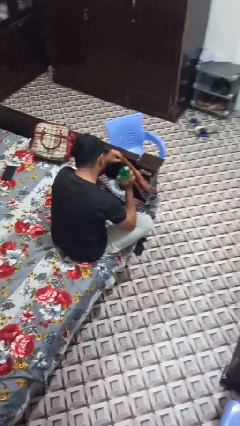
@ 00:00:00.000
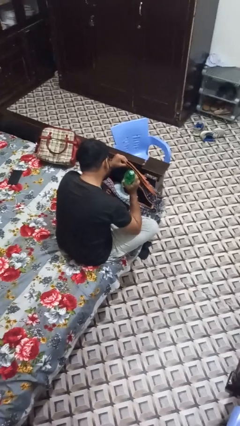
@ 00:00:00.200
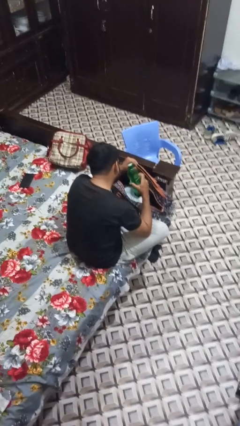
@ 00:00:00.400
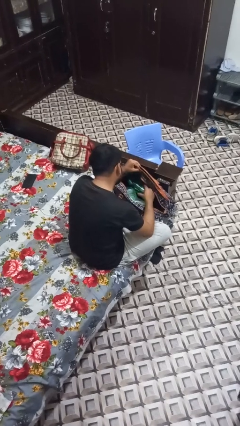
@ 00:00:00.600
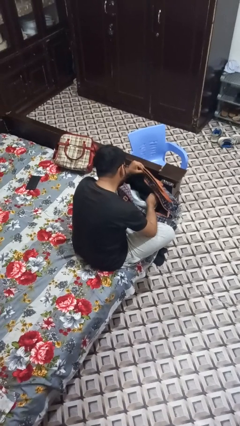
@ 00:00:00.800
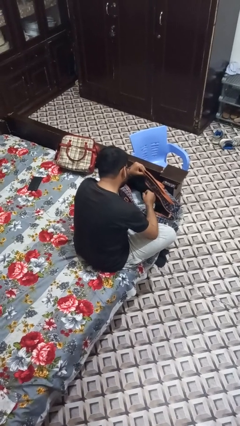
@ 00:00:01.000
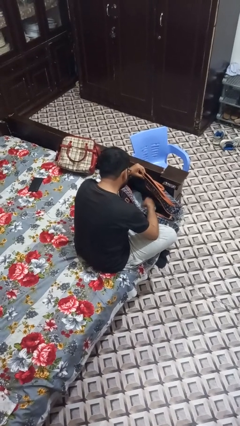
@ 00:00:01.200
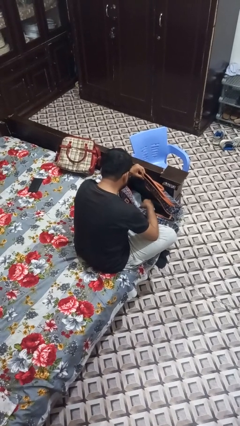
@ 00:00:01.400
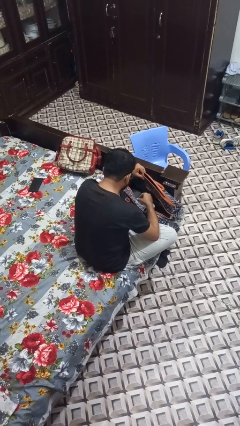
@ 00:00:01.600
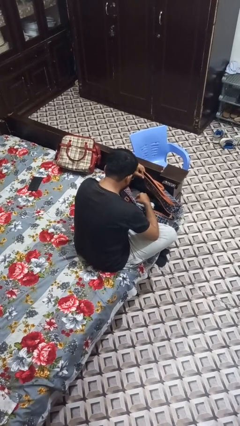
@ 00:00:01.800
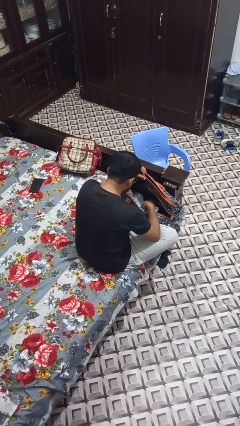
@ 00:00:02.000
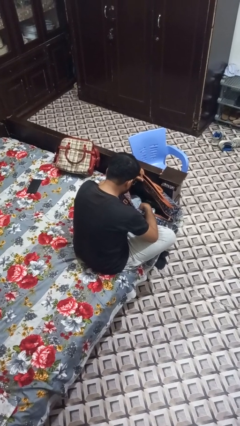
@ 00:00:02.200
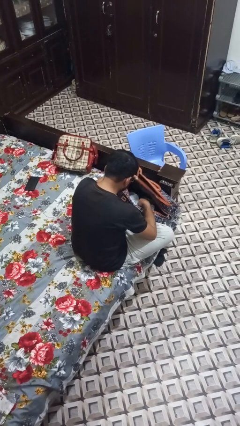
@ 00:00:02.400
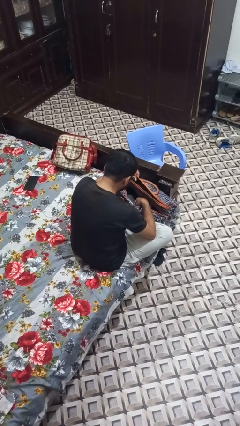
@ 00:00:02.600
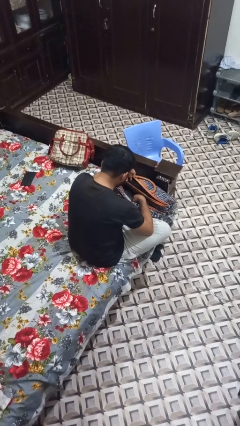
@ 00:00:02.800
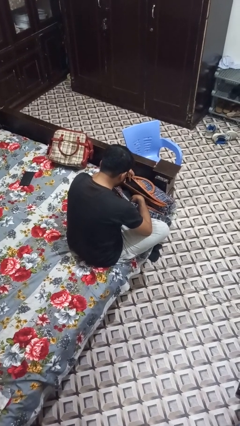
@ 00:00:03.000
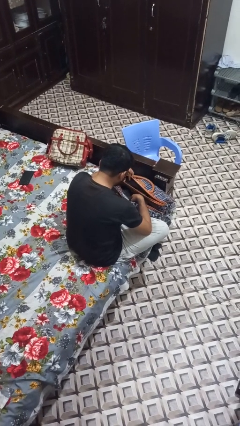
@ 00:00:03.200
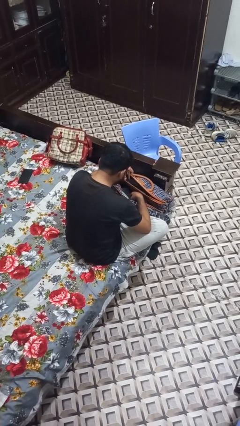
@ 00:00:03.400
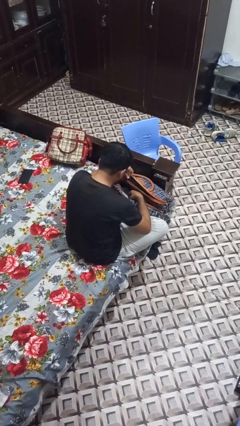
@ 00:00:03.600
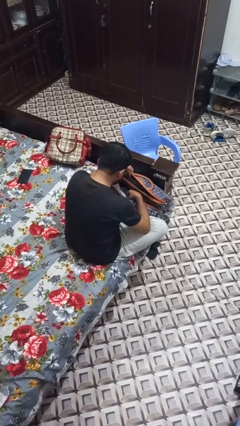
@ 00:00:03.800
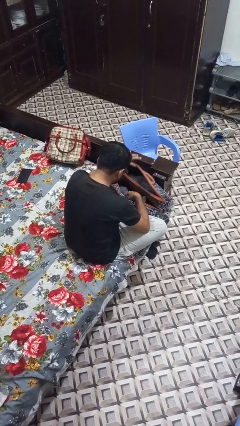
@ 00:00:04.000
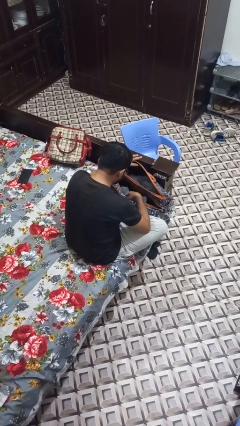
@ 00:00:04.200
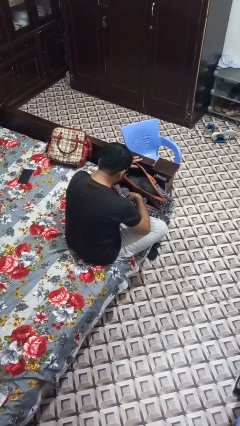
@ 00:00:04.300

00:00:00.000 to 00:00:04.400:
person puts object into backpack

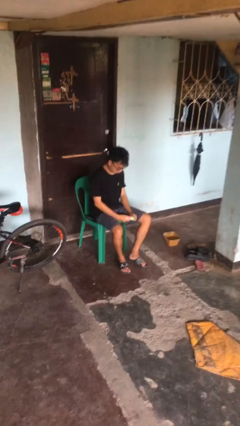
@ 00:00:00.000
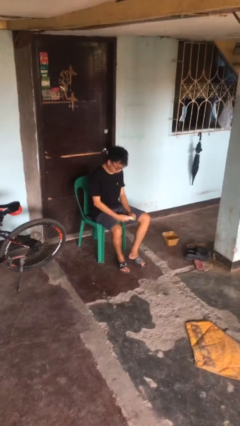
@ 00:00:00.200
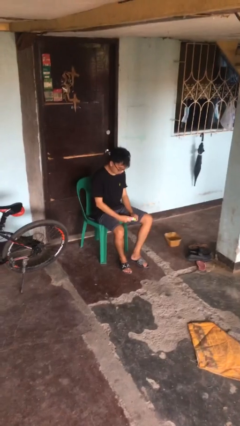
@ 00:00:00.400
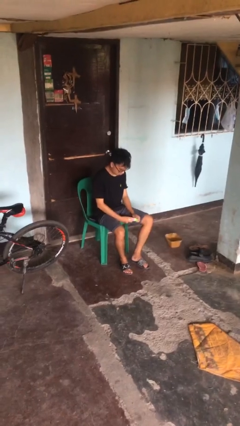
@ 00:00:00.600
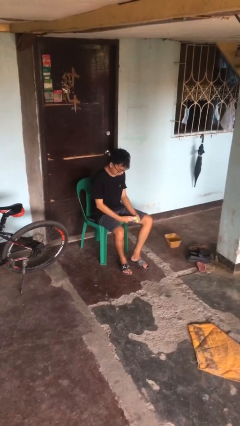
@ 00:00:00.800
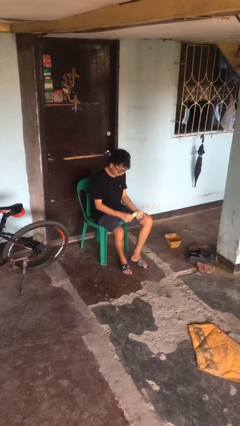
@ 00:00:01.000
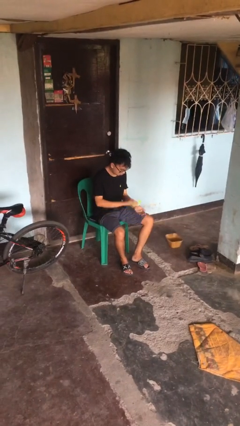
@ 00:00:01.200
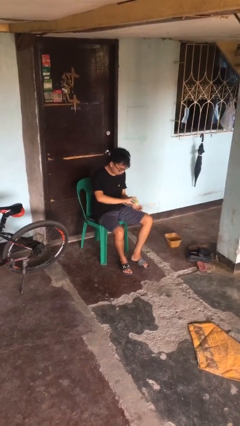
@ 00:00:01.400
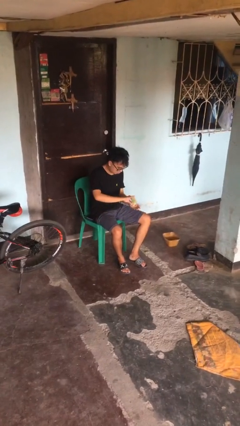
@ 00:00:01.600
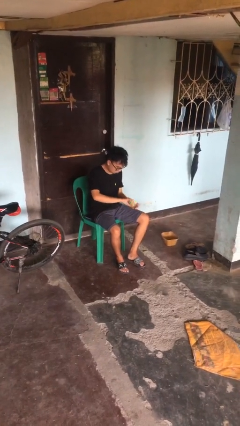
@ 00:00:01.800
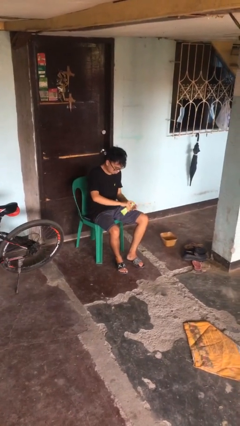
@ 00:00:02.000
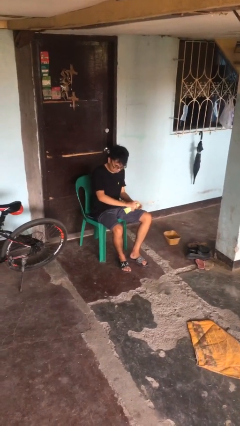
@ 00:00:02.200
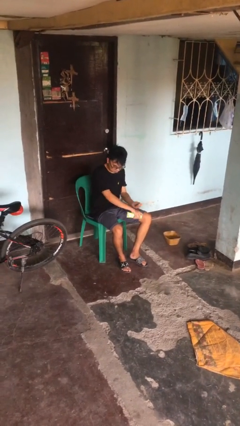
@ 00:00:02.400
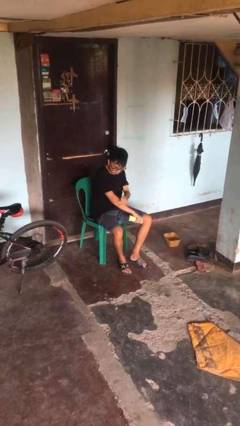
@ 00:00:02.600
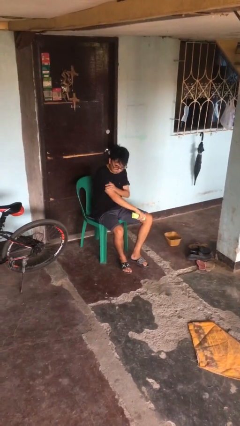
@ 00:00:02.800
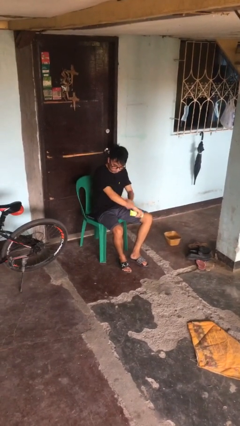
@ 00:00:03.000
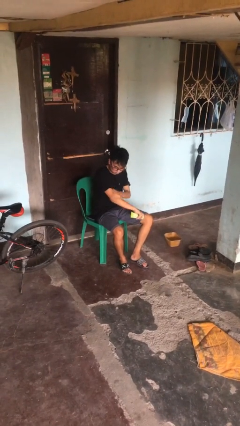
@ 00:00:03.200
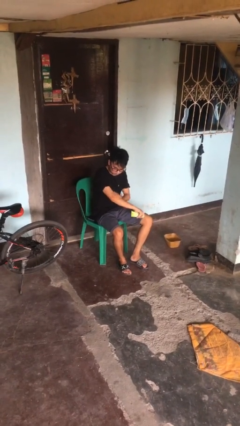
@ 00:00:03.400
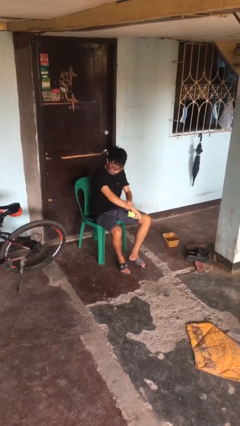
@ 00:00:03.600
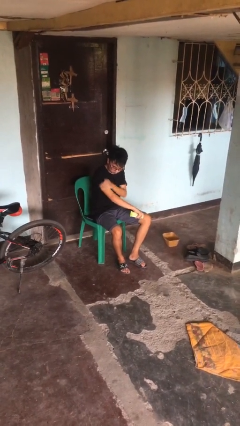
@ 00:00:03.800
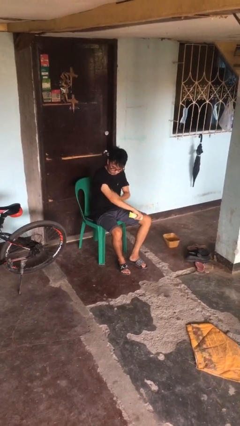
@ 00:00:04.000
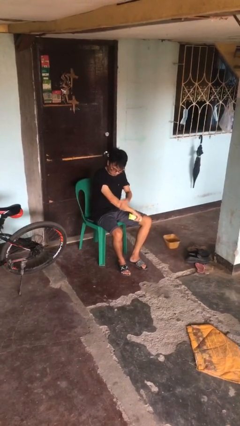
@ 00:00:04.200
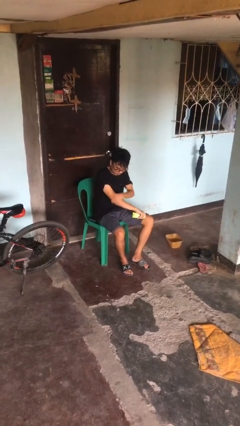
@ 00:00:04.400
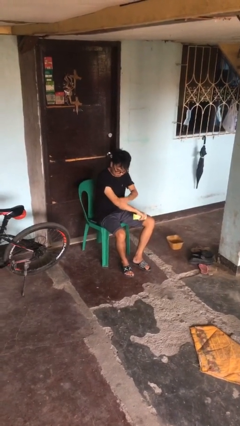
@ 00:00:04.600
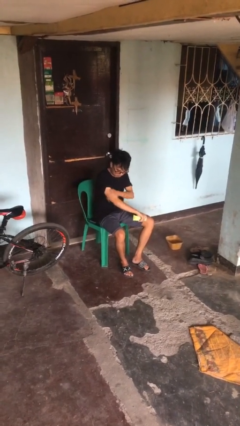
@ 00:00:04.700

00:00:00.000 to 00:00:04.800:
person applies sunscreen

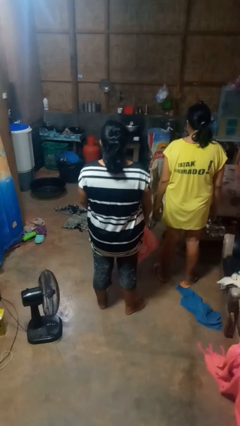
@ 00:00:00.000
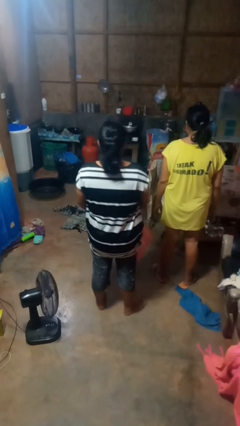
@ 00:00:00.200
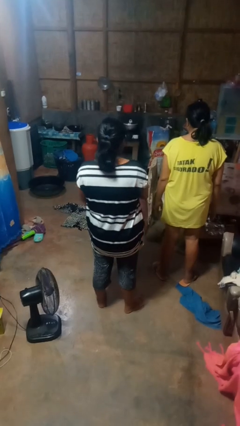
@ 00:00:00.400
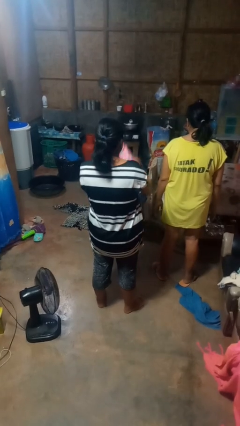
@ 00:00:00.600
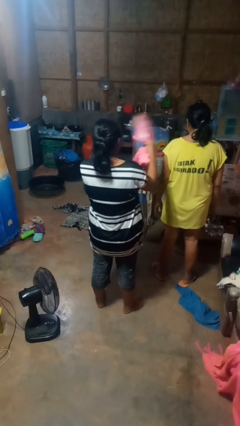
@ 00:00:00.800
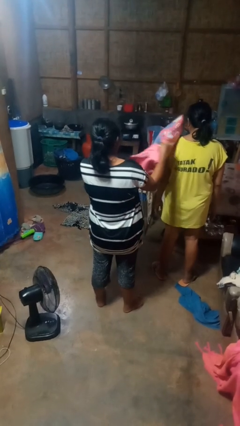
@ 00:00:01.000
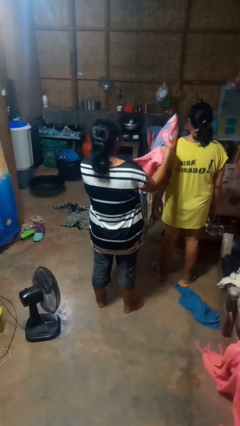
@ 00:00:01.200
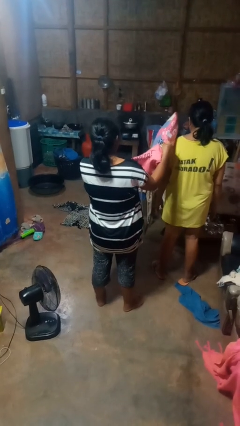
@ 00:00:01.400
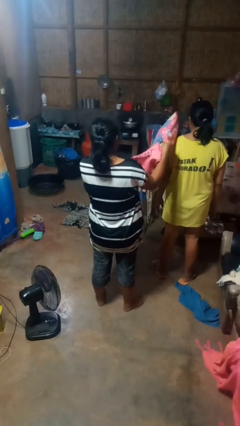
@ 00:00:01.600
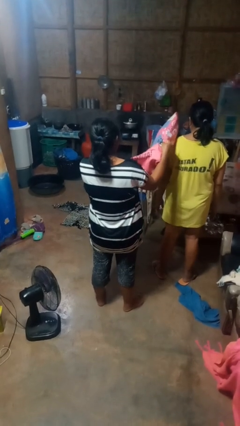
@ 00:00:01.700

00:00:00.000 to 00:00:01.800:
person hits person with pillow

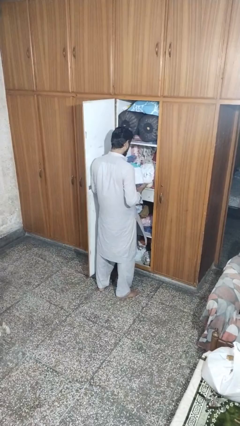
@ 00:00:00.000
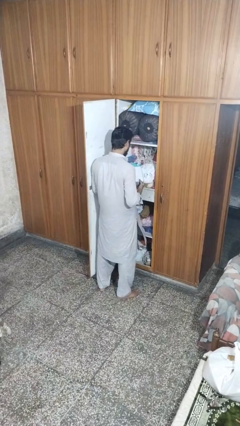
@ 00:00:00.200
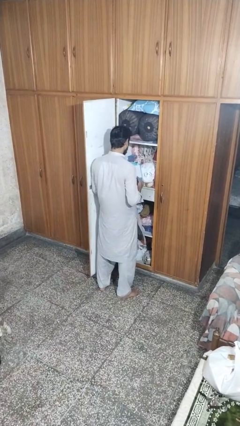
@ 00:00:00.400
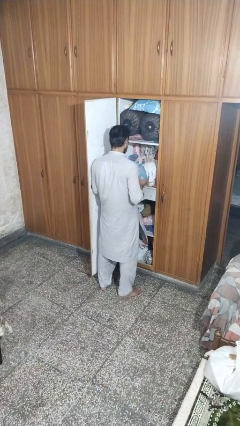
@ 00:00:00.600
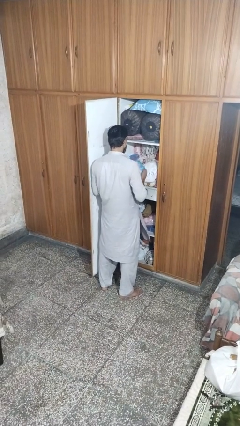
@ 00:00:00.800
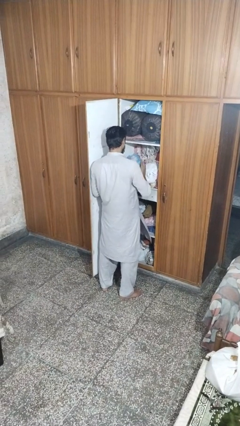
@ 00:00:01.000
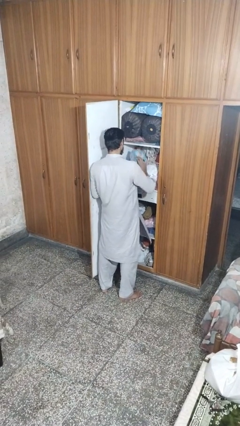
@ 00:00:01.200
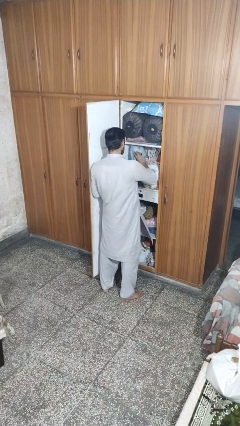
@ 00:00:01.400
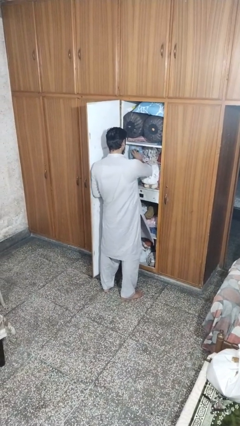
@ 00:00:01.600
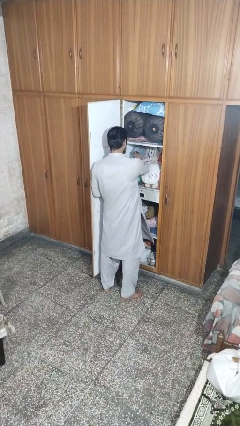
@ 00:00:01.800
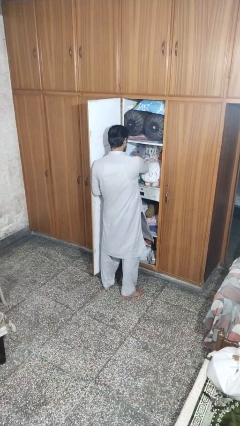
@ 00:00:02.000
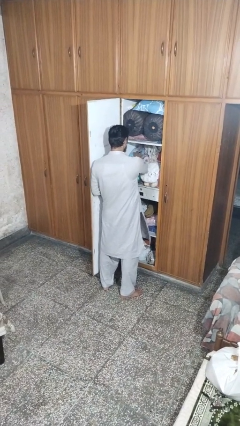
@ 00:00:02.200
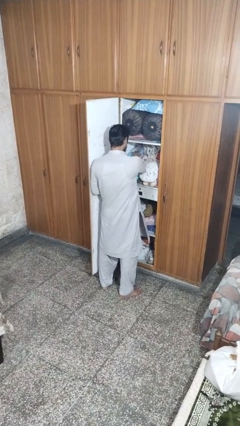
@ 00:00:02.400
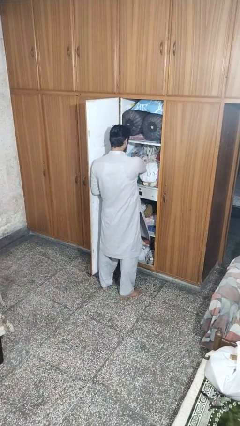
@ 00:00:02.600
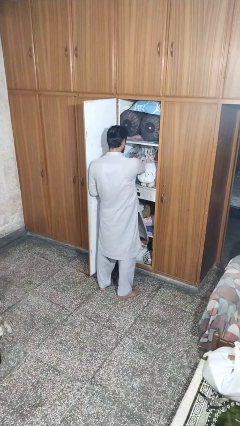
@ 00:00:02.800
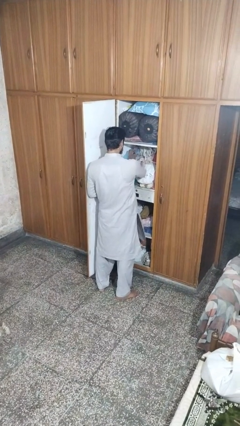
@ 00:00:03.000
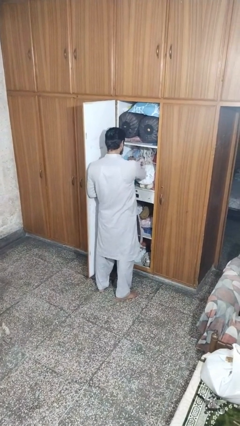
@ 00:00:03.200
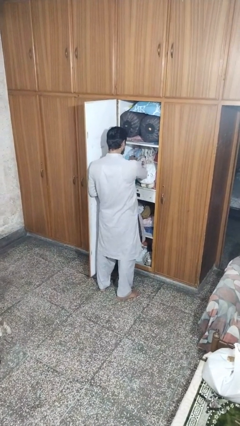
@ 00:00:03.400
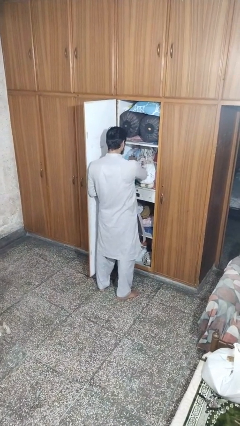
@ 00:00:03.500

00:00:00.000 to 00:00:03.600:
person puts down object into cabinet

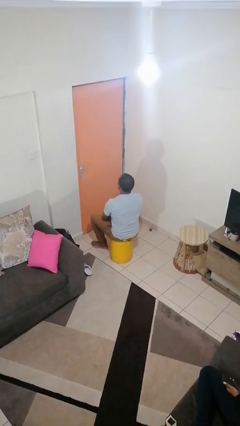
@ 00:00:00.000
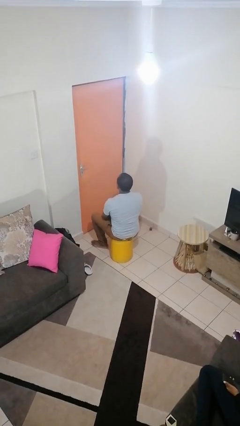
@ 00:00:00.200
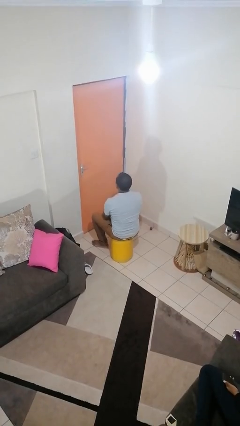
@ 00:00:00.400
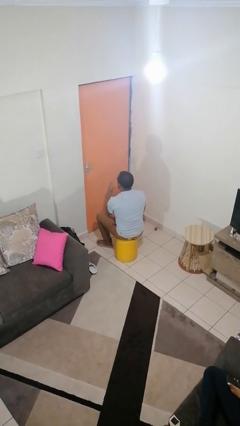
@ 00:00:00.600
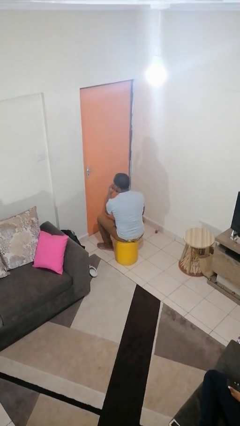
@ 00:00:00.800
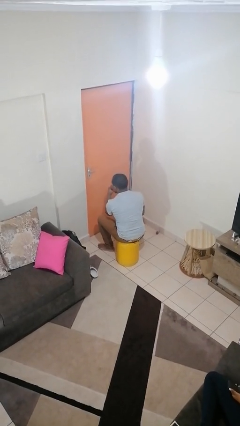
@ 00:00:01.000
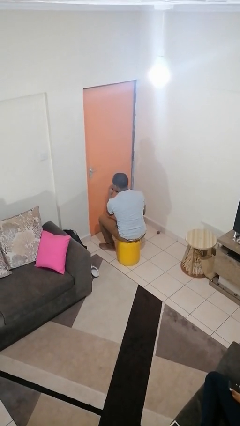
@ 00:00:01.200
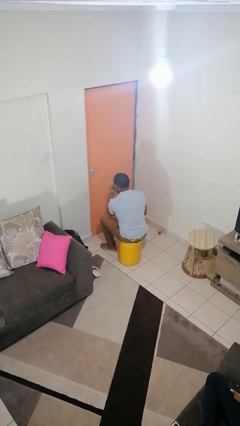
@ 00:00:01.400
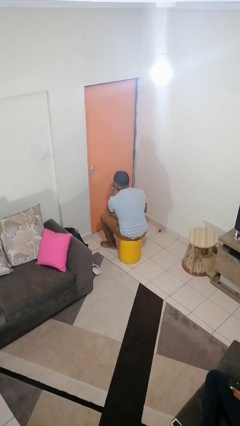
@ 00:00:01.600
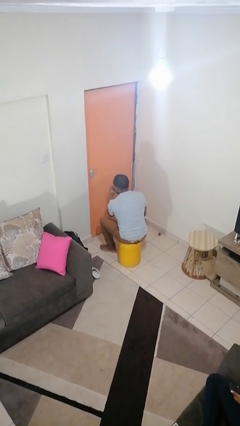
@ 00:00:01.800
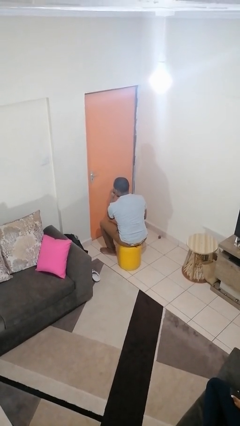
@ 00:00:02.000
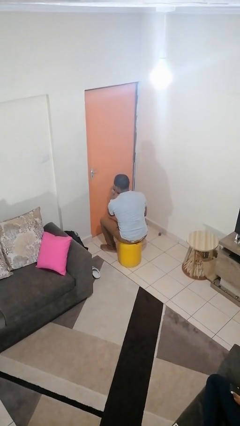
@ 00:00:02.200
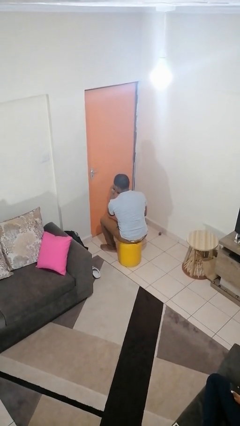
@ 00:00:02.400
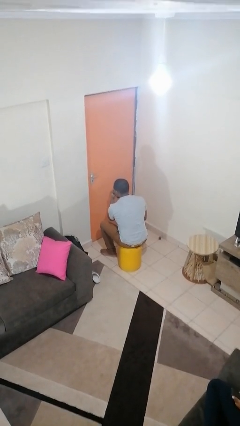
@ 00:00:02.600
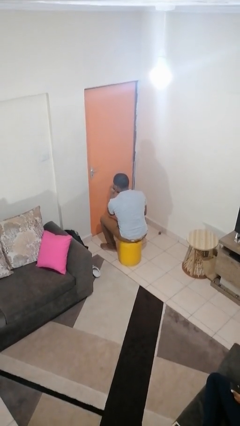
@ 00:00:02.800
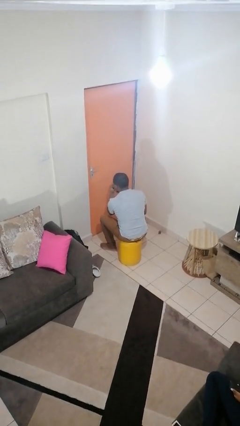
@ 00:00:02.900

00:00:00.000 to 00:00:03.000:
person gestures watch closely
